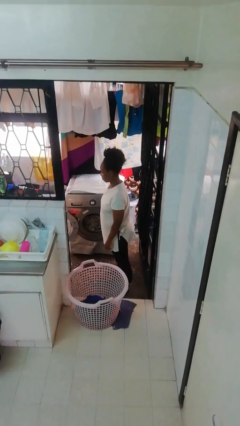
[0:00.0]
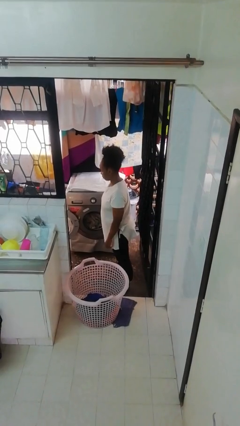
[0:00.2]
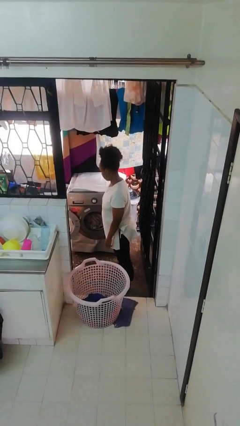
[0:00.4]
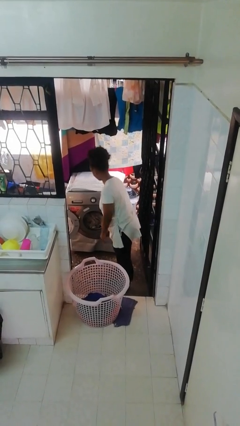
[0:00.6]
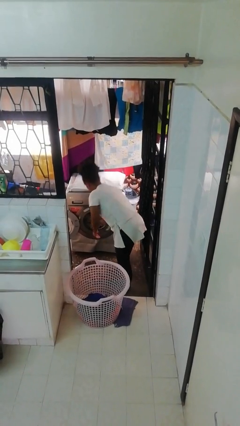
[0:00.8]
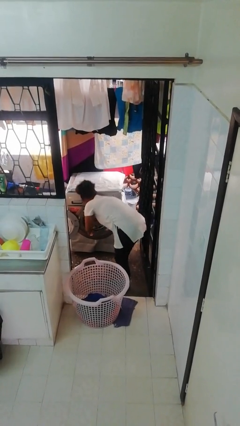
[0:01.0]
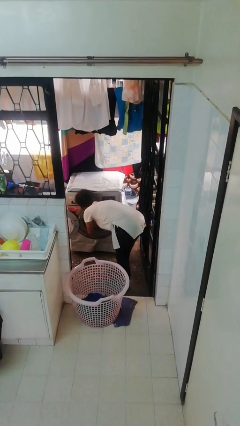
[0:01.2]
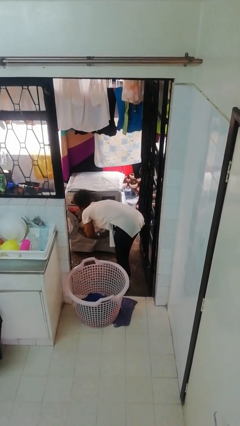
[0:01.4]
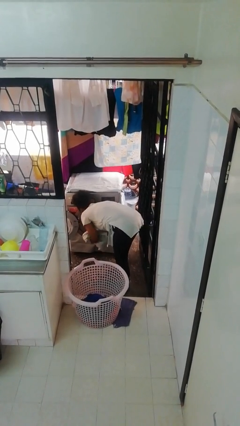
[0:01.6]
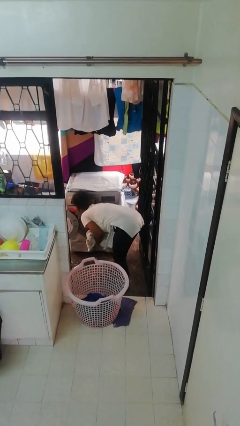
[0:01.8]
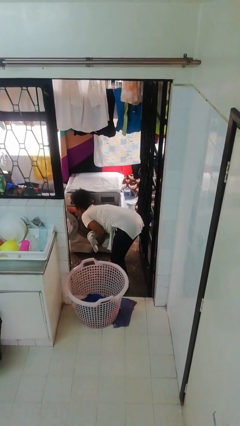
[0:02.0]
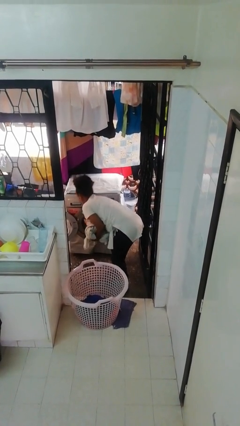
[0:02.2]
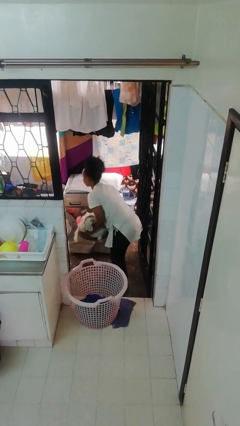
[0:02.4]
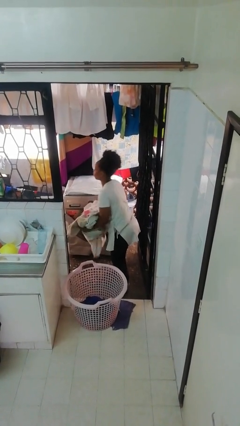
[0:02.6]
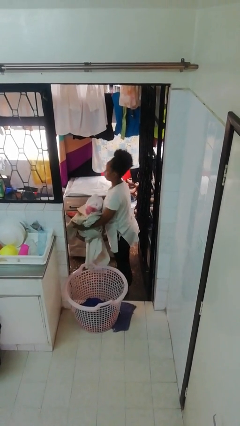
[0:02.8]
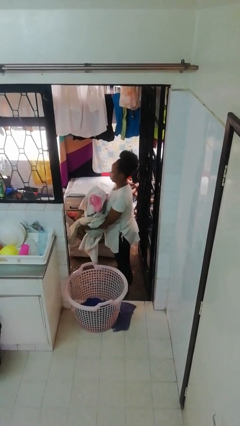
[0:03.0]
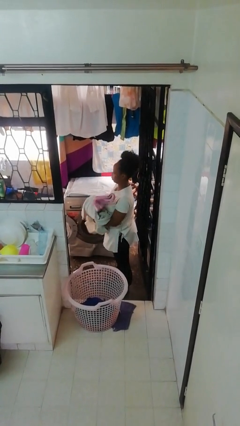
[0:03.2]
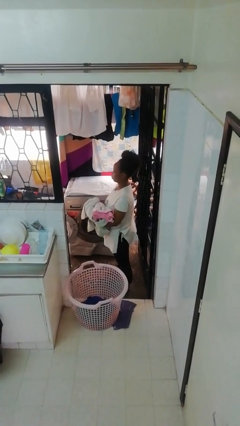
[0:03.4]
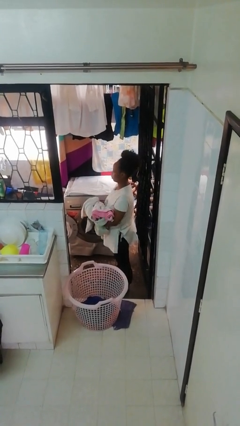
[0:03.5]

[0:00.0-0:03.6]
person unloads dryer

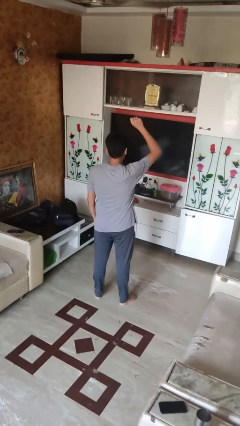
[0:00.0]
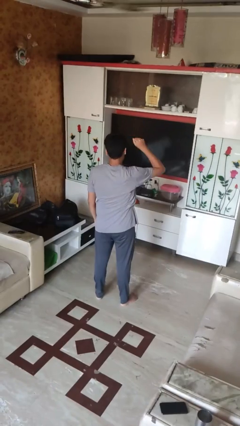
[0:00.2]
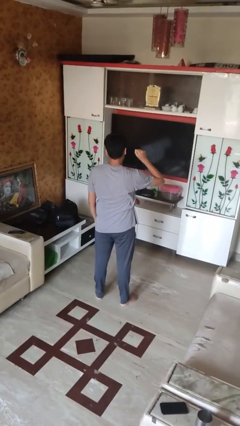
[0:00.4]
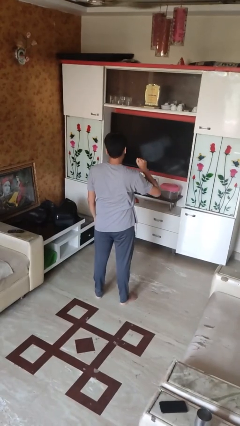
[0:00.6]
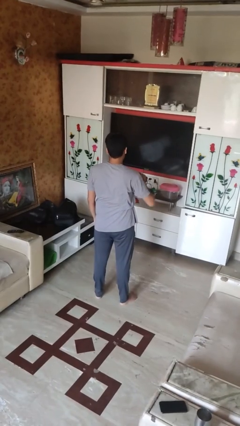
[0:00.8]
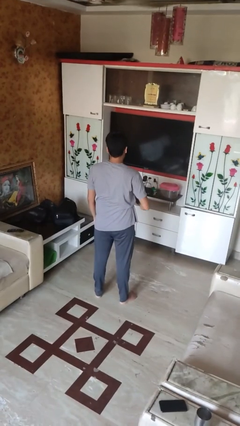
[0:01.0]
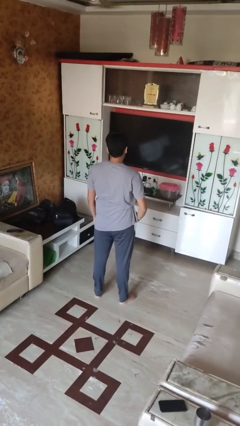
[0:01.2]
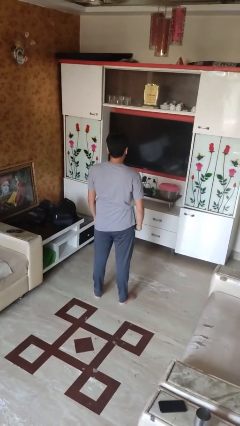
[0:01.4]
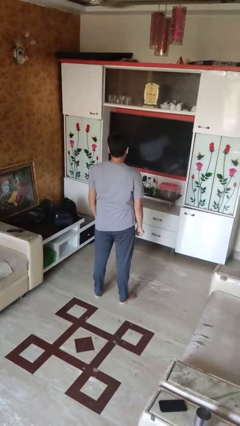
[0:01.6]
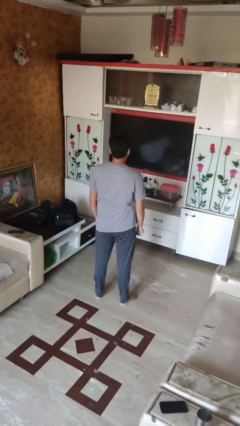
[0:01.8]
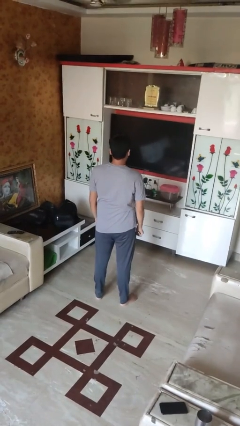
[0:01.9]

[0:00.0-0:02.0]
person gestures lower hand

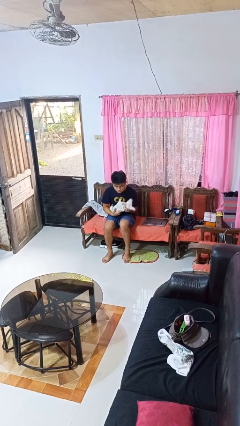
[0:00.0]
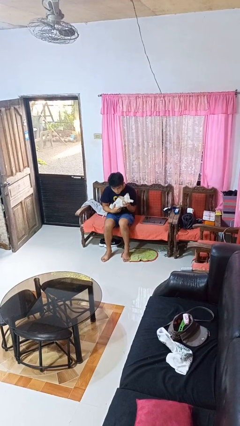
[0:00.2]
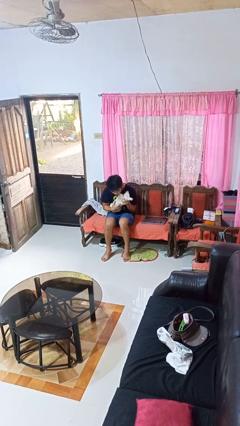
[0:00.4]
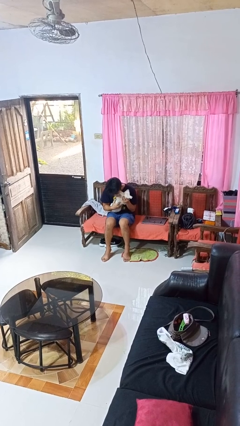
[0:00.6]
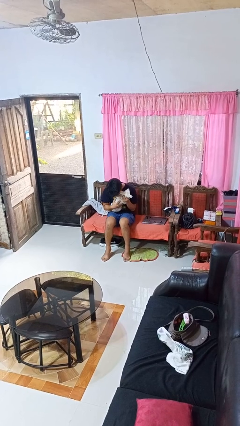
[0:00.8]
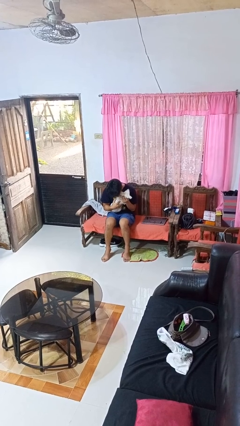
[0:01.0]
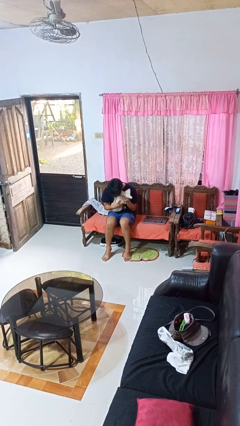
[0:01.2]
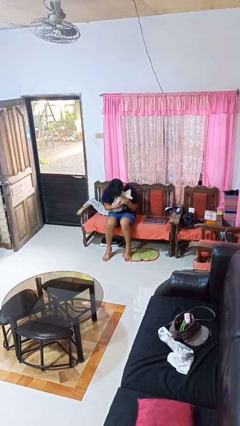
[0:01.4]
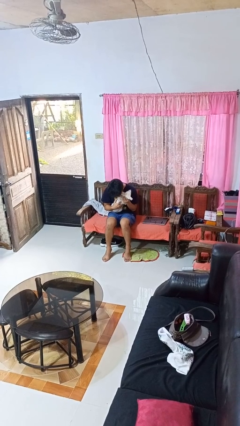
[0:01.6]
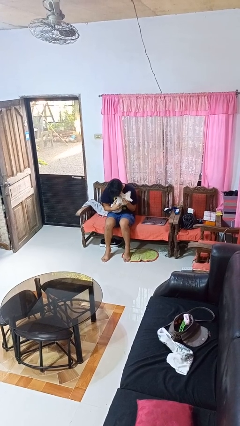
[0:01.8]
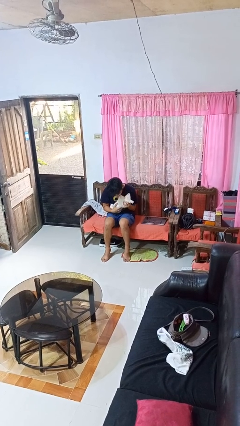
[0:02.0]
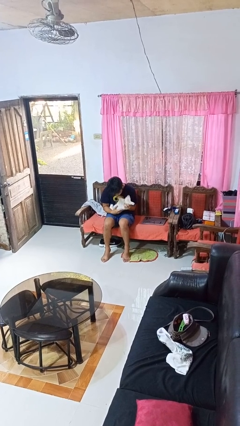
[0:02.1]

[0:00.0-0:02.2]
person hugs dog

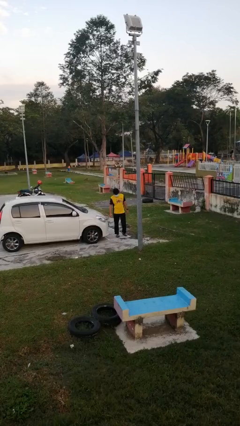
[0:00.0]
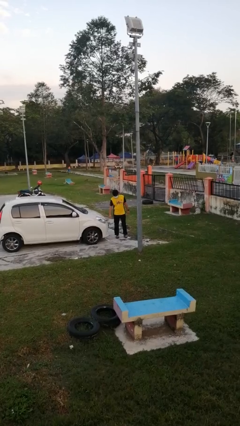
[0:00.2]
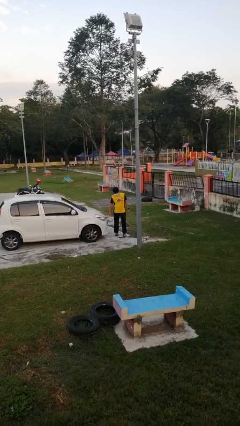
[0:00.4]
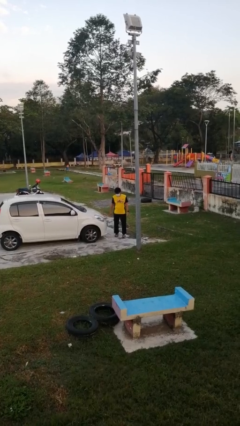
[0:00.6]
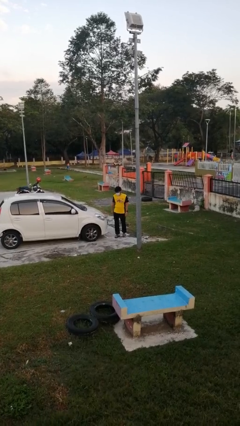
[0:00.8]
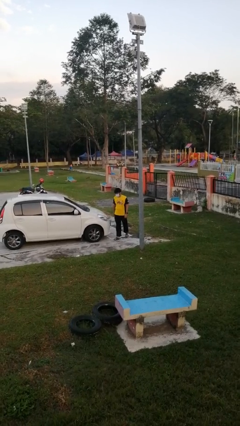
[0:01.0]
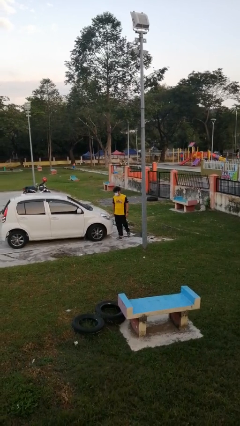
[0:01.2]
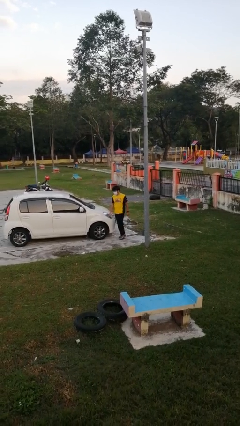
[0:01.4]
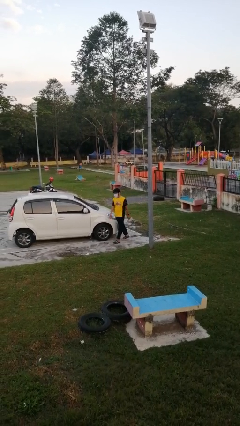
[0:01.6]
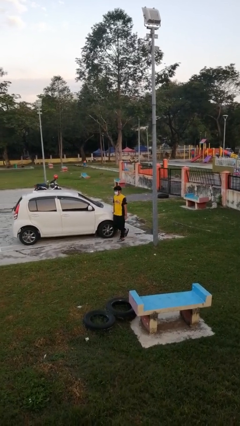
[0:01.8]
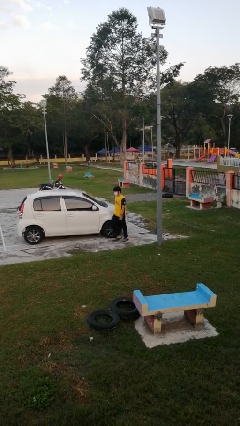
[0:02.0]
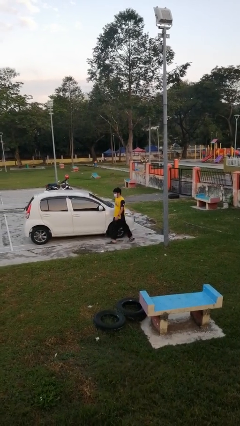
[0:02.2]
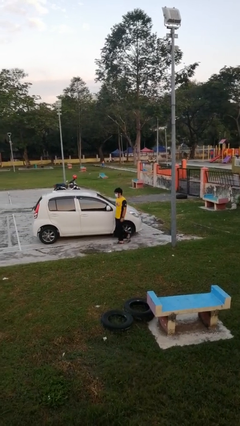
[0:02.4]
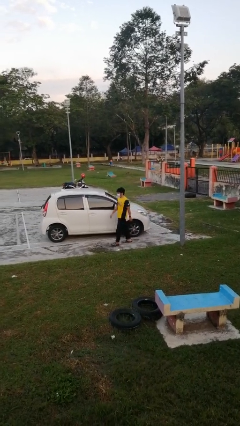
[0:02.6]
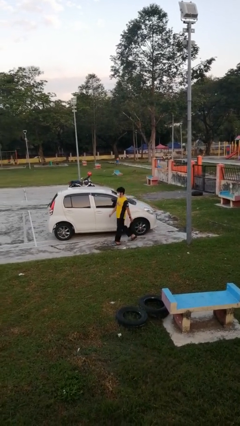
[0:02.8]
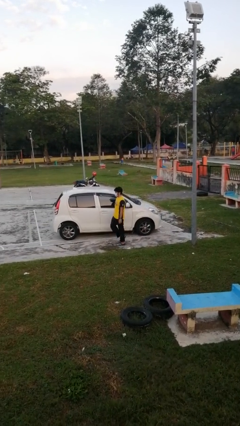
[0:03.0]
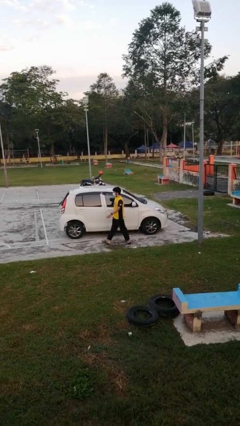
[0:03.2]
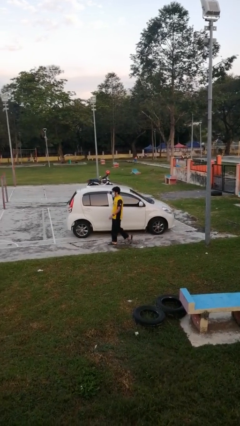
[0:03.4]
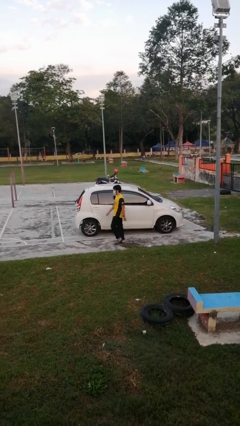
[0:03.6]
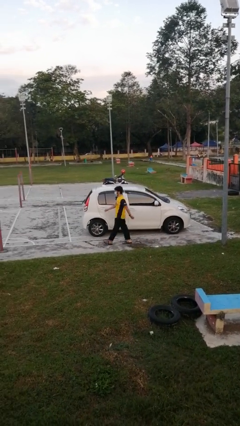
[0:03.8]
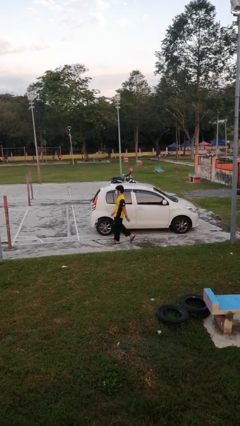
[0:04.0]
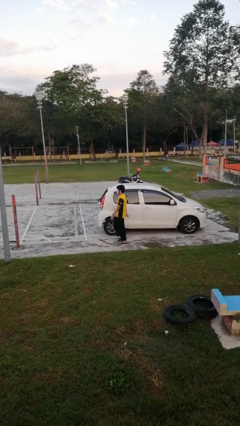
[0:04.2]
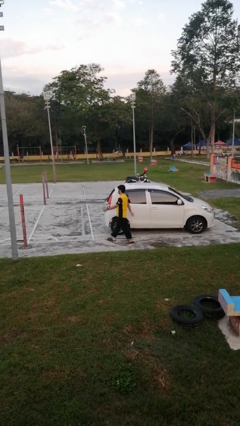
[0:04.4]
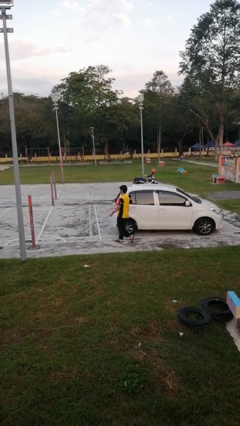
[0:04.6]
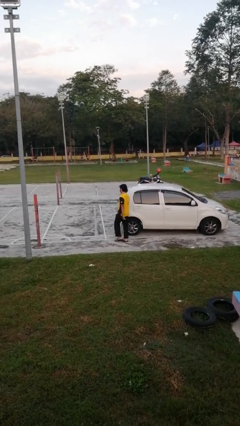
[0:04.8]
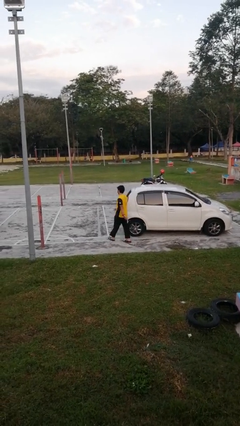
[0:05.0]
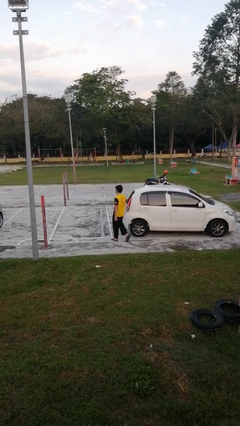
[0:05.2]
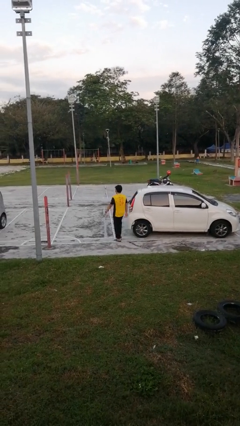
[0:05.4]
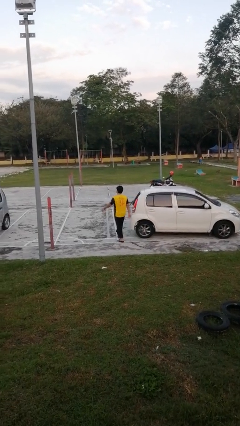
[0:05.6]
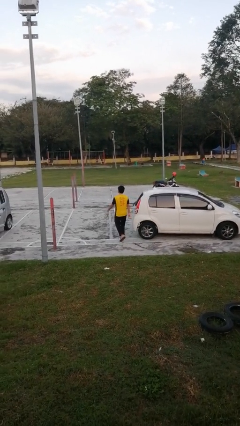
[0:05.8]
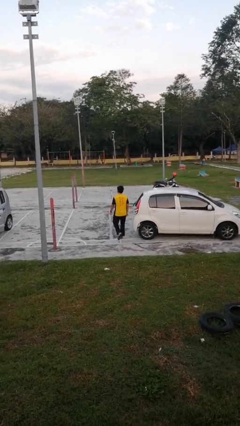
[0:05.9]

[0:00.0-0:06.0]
person walks around car

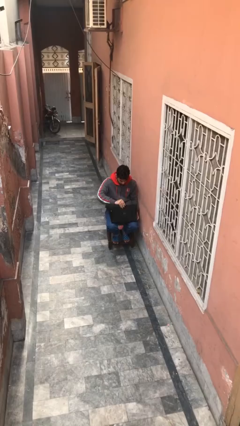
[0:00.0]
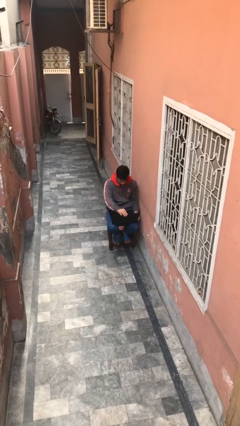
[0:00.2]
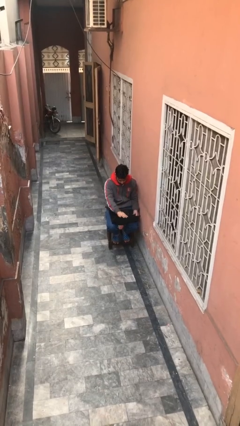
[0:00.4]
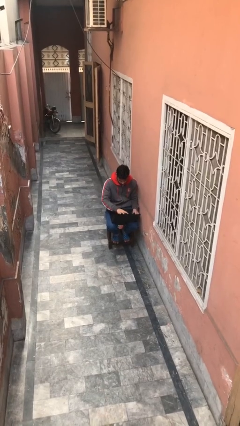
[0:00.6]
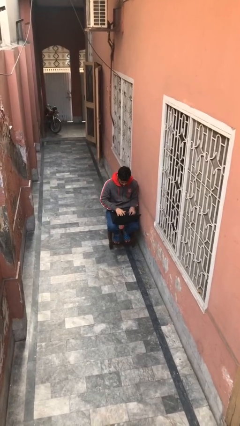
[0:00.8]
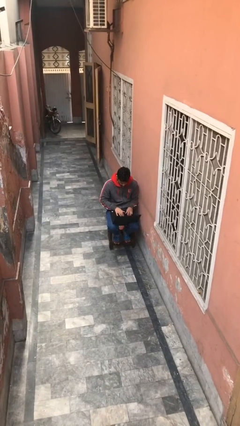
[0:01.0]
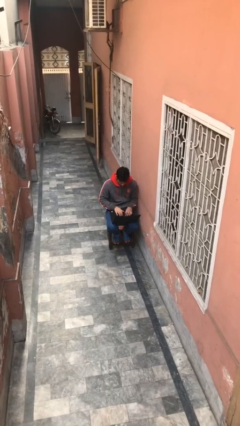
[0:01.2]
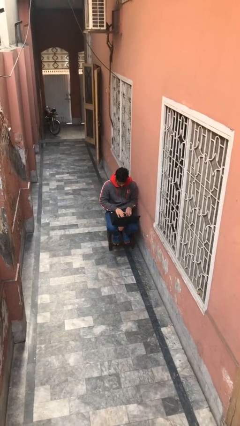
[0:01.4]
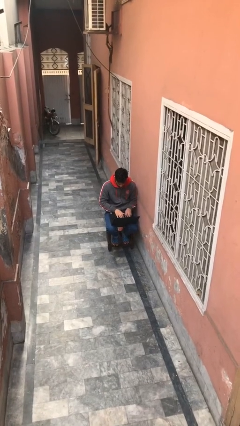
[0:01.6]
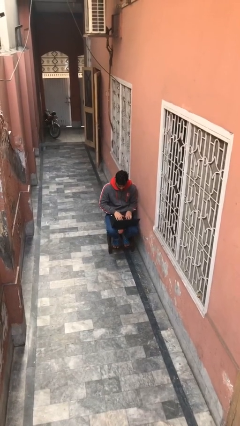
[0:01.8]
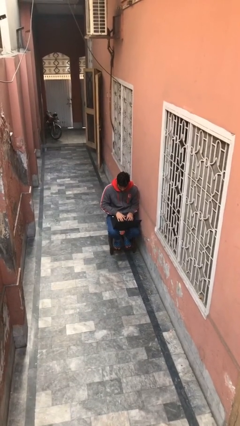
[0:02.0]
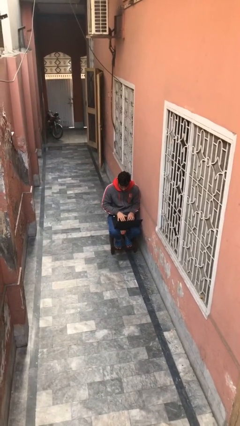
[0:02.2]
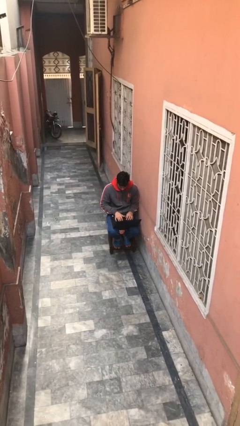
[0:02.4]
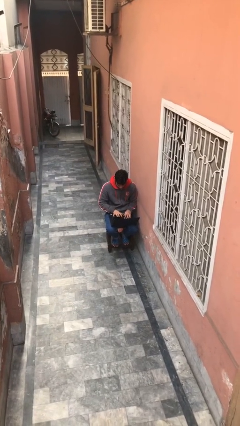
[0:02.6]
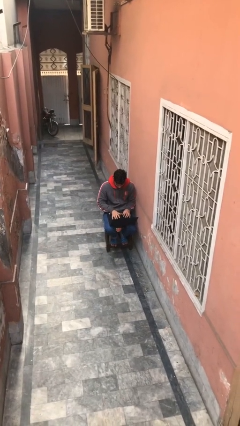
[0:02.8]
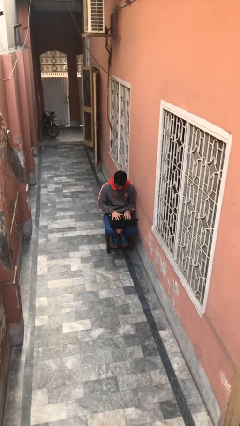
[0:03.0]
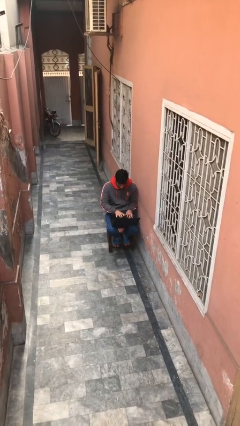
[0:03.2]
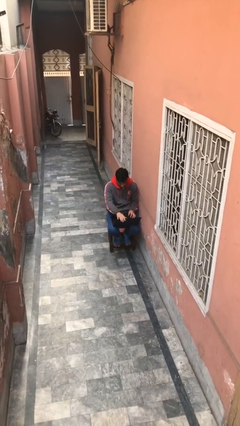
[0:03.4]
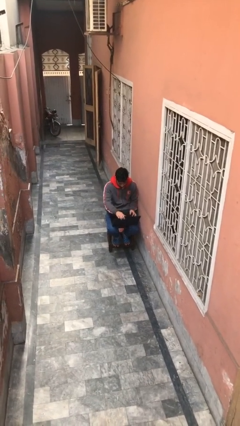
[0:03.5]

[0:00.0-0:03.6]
person interacts with laptop

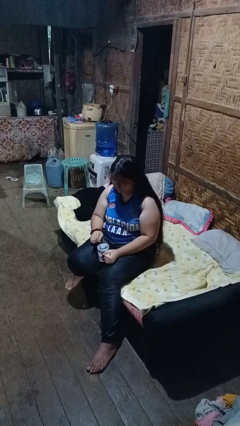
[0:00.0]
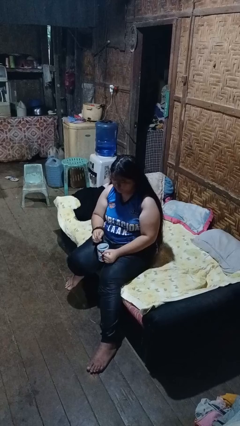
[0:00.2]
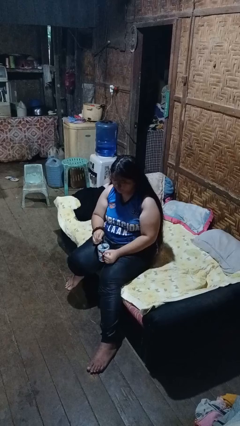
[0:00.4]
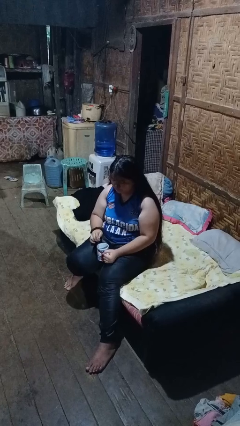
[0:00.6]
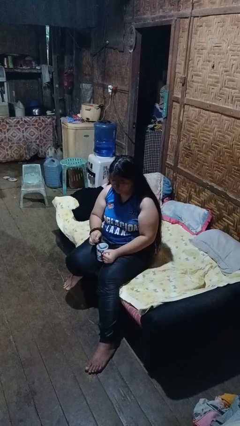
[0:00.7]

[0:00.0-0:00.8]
person stirs mug
